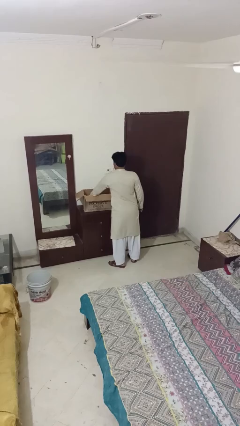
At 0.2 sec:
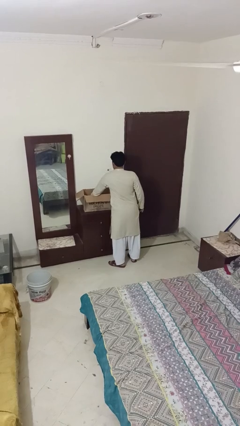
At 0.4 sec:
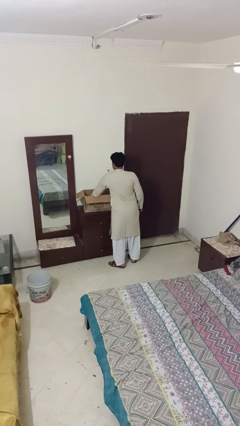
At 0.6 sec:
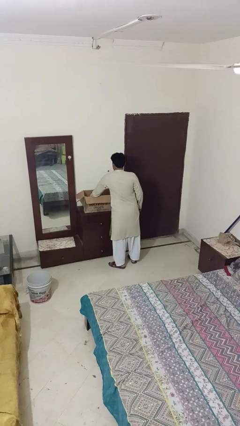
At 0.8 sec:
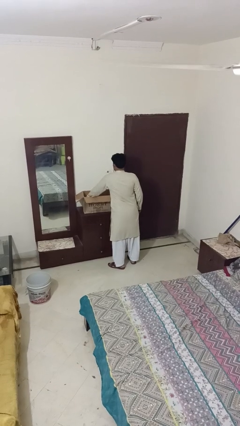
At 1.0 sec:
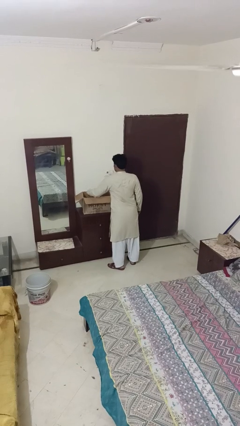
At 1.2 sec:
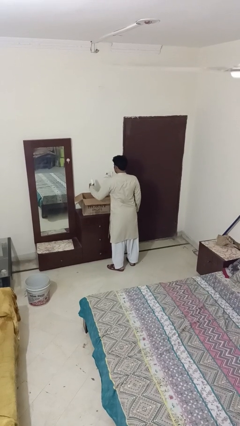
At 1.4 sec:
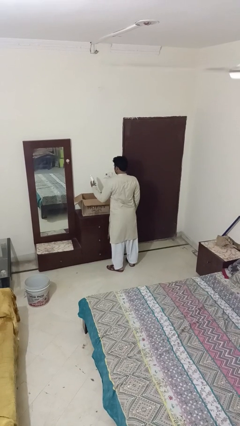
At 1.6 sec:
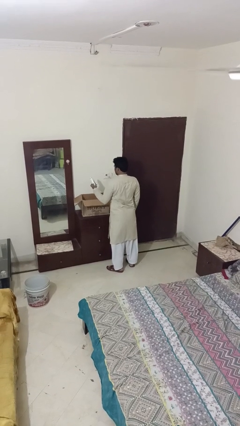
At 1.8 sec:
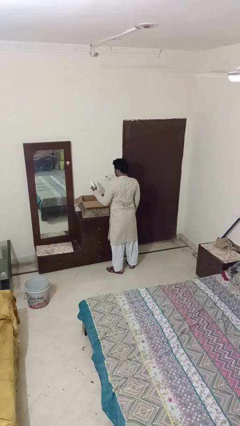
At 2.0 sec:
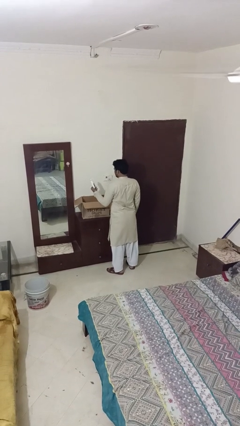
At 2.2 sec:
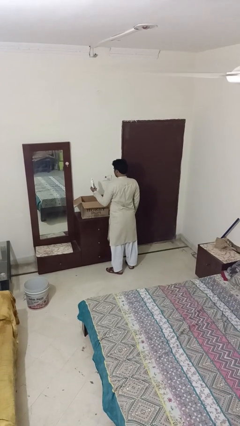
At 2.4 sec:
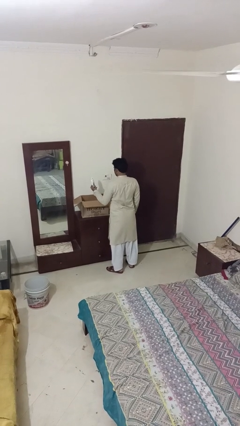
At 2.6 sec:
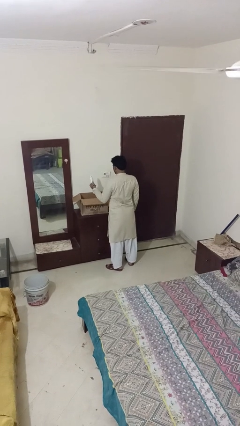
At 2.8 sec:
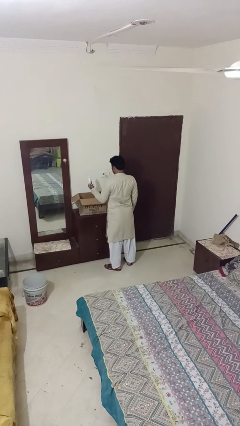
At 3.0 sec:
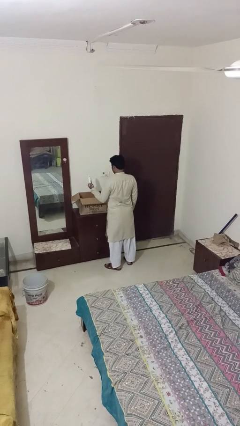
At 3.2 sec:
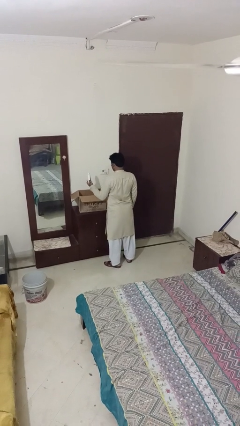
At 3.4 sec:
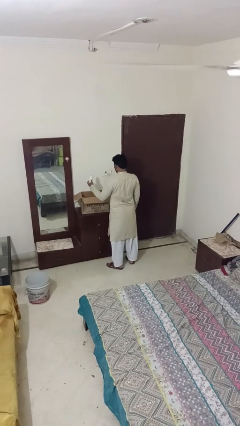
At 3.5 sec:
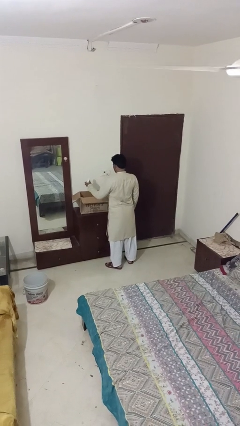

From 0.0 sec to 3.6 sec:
person takes object from box

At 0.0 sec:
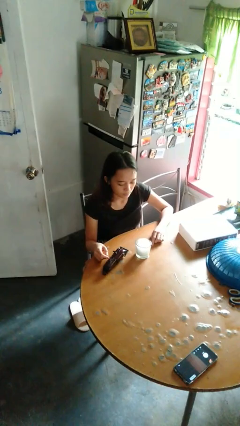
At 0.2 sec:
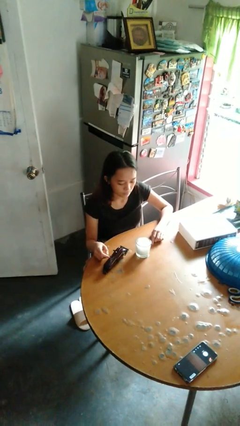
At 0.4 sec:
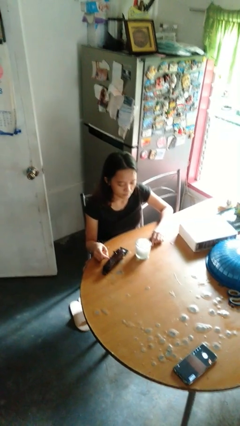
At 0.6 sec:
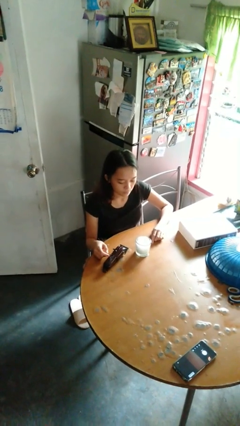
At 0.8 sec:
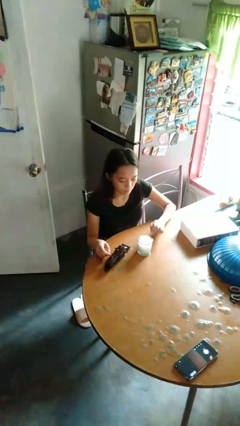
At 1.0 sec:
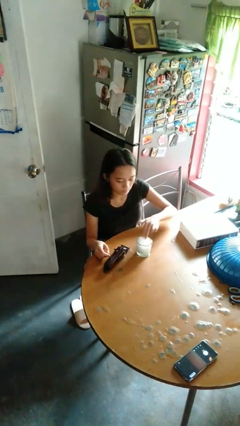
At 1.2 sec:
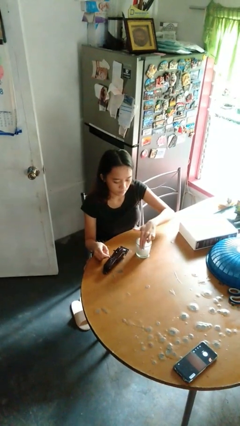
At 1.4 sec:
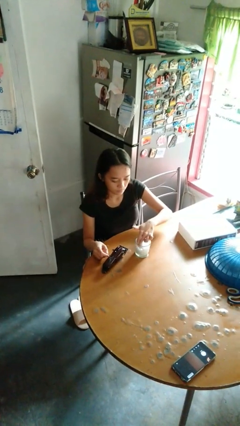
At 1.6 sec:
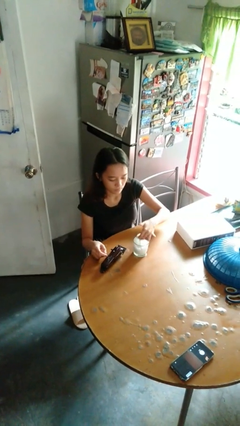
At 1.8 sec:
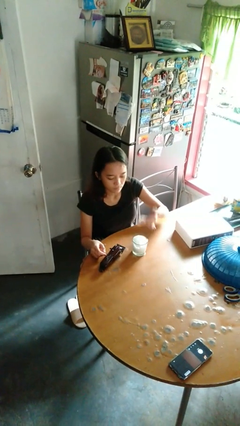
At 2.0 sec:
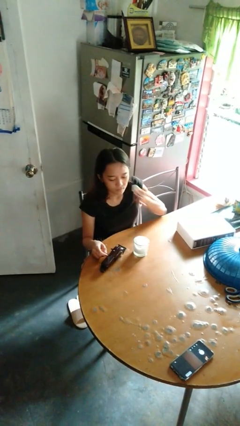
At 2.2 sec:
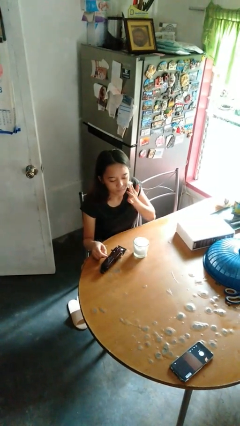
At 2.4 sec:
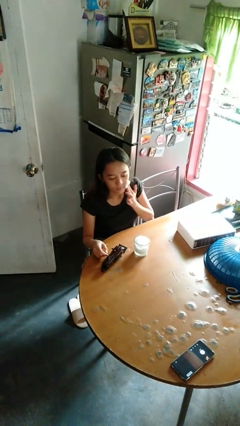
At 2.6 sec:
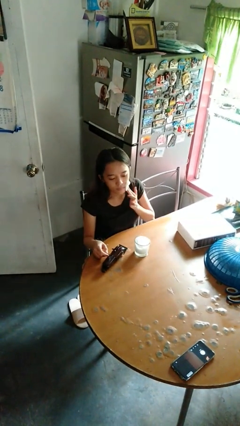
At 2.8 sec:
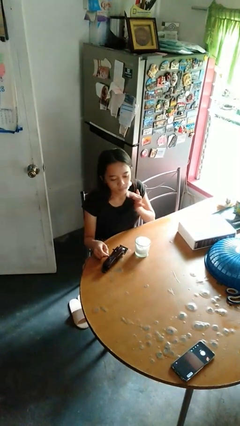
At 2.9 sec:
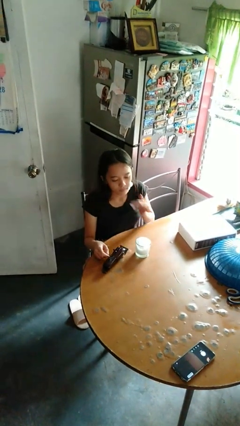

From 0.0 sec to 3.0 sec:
person applies shaving cream

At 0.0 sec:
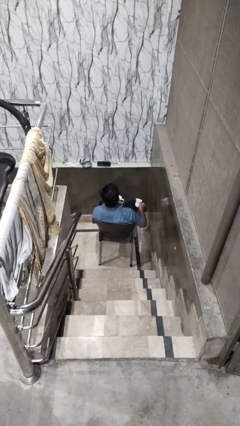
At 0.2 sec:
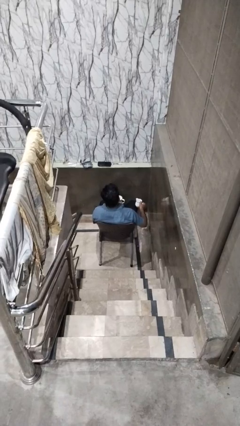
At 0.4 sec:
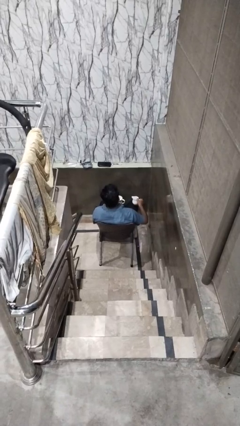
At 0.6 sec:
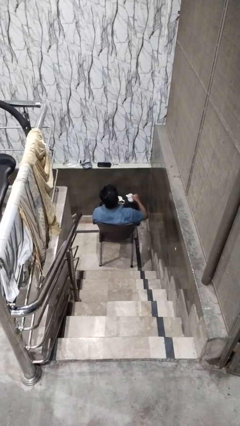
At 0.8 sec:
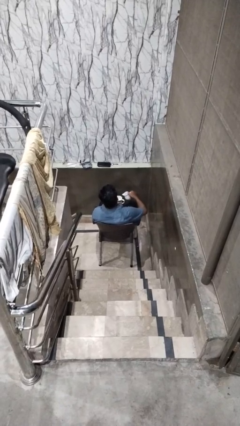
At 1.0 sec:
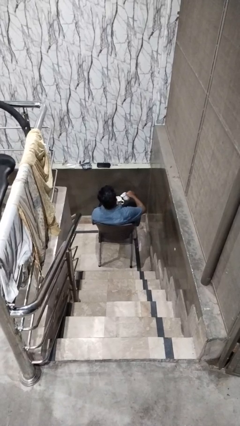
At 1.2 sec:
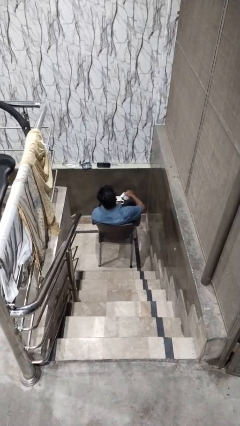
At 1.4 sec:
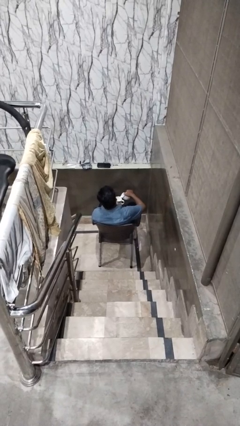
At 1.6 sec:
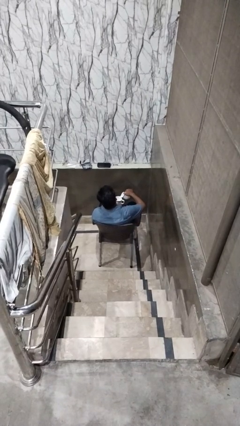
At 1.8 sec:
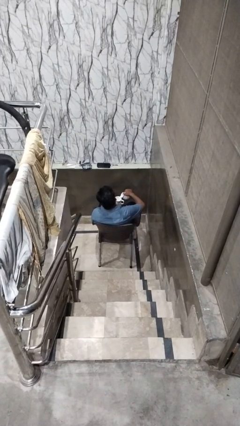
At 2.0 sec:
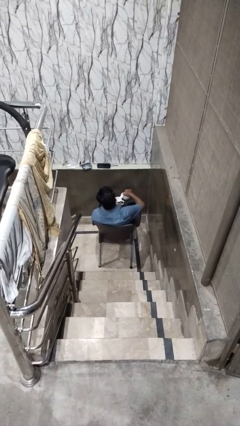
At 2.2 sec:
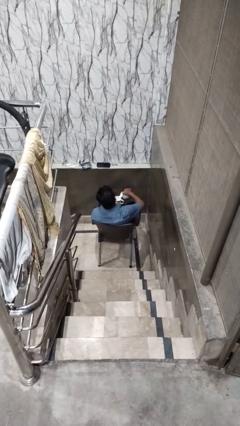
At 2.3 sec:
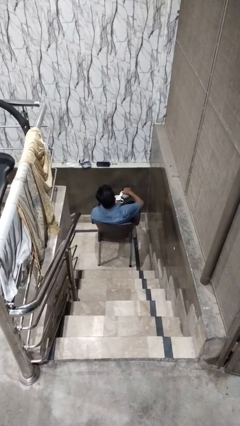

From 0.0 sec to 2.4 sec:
person pours coffee into mug

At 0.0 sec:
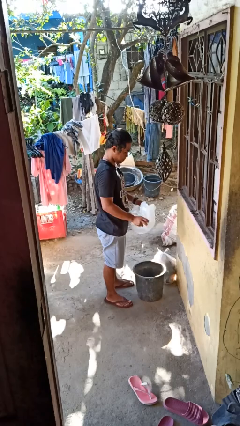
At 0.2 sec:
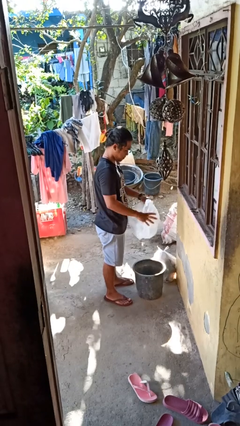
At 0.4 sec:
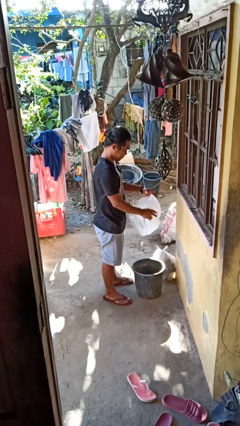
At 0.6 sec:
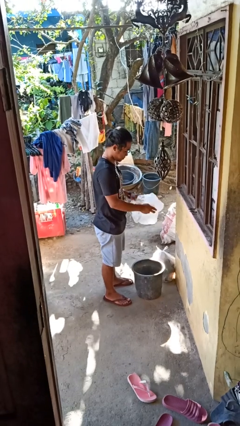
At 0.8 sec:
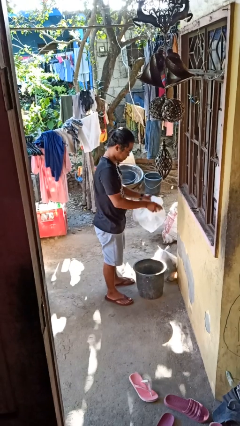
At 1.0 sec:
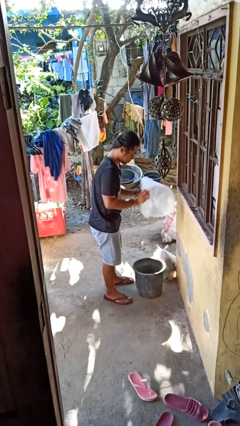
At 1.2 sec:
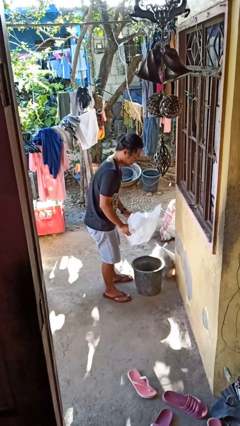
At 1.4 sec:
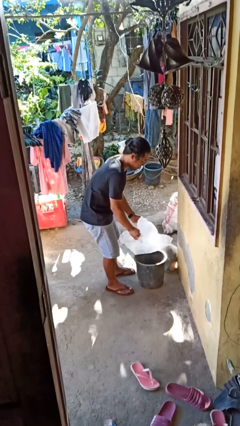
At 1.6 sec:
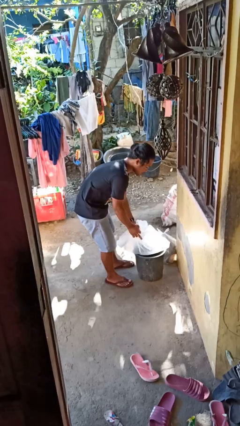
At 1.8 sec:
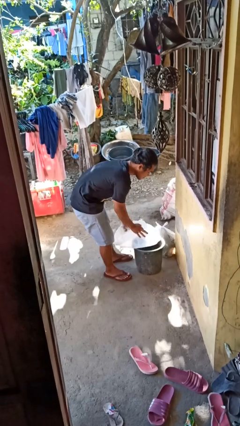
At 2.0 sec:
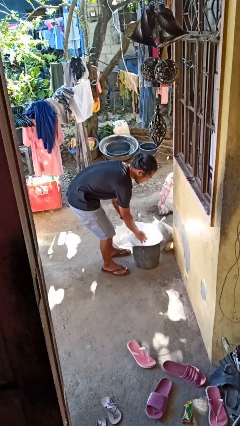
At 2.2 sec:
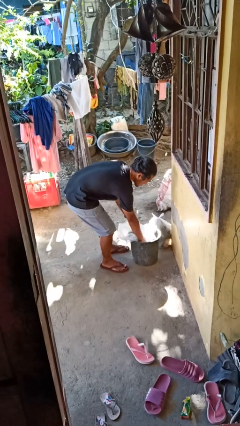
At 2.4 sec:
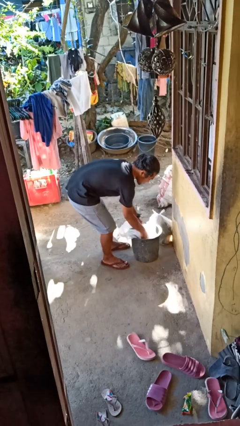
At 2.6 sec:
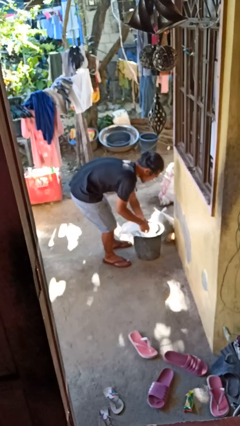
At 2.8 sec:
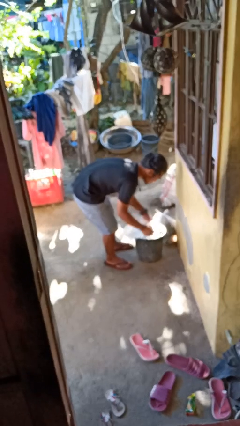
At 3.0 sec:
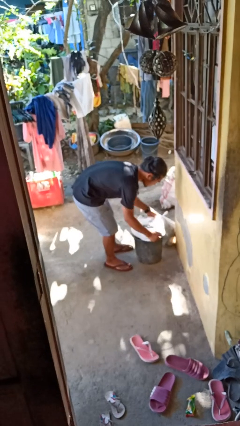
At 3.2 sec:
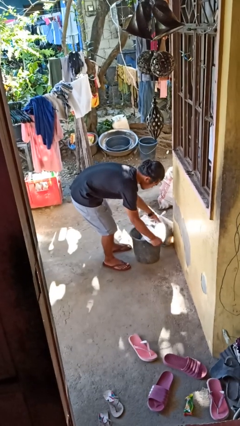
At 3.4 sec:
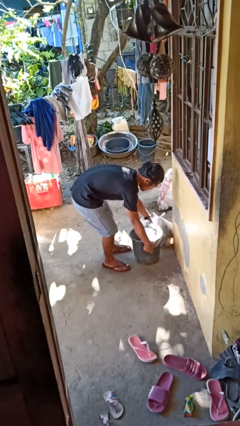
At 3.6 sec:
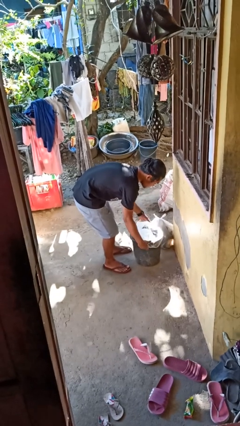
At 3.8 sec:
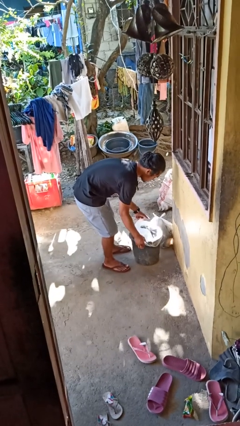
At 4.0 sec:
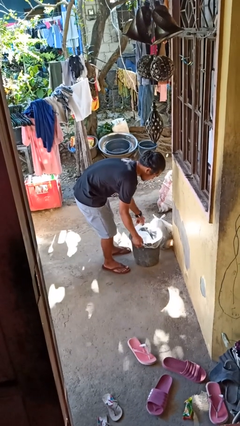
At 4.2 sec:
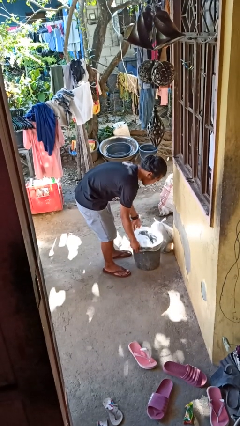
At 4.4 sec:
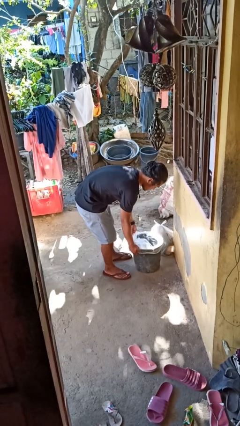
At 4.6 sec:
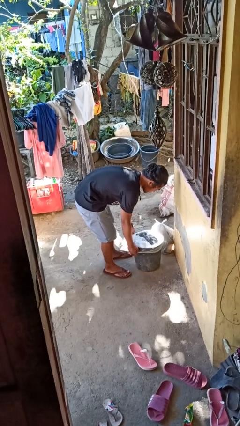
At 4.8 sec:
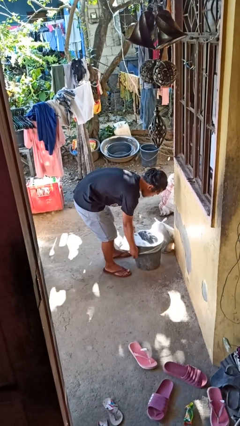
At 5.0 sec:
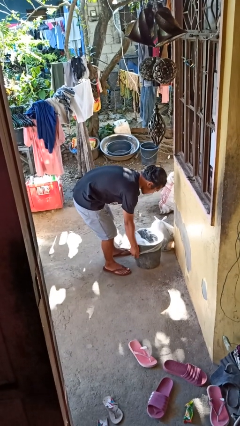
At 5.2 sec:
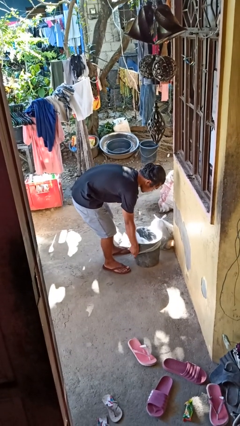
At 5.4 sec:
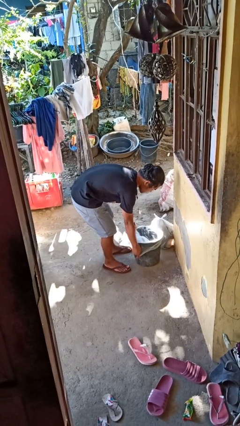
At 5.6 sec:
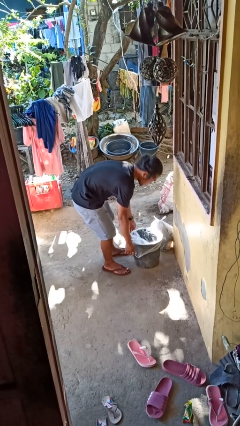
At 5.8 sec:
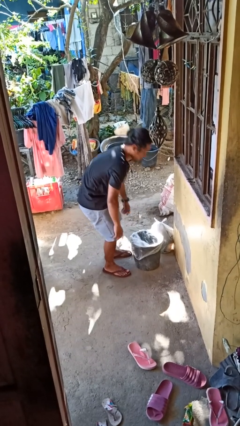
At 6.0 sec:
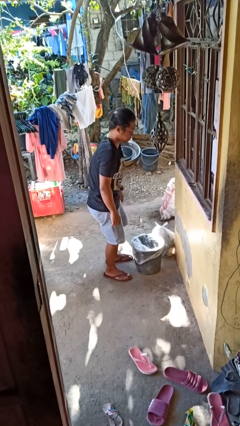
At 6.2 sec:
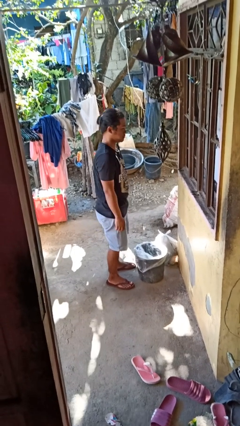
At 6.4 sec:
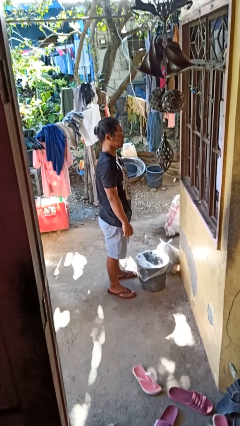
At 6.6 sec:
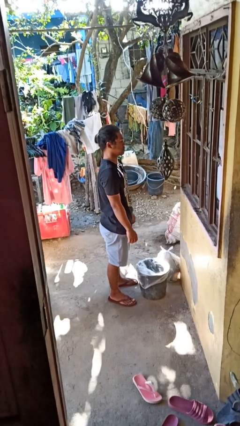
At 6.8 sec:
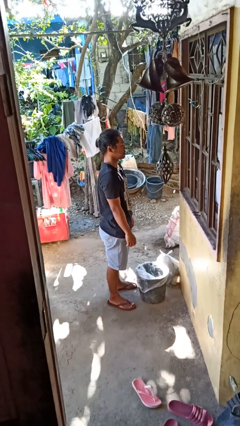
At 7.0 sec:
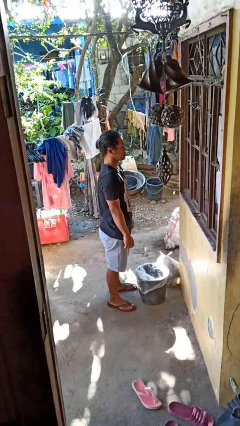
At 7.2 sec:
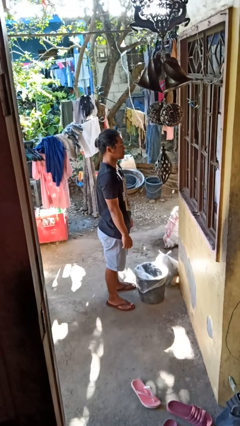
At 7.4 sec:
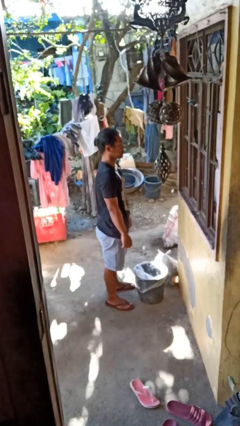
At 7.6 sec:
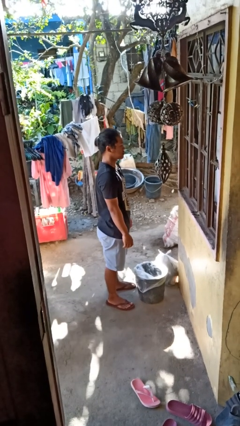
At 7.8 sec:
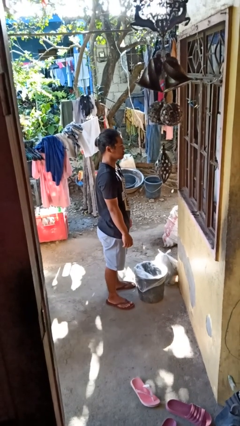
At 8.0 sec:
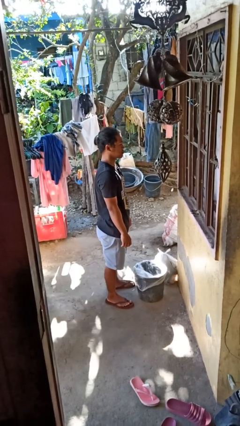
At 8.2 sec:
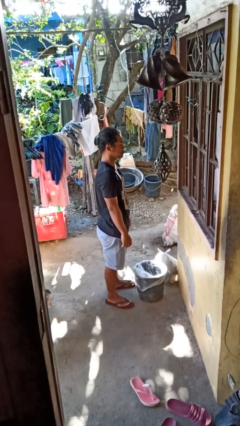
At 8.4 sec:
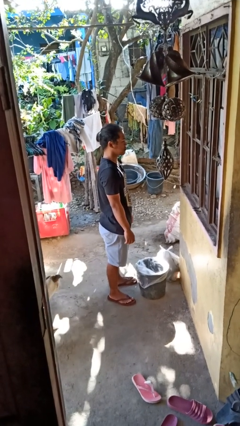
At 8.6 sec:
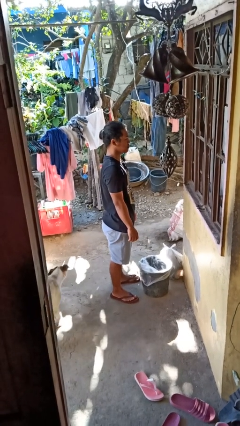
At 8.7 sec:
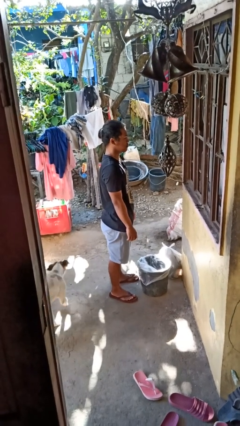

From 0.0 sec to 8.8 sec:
person inserts trashbag into trashcan

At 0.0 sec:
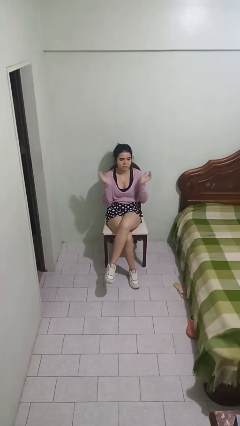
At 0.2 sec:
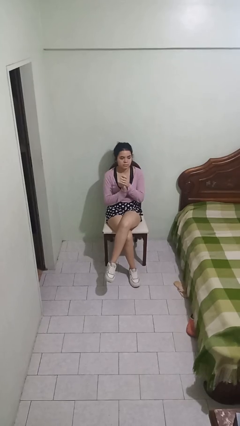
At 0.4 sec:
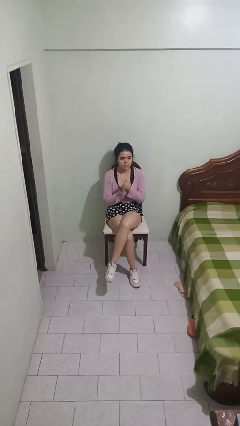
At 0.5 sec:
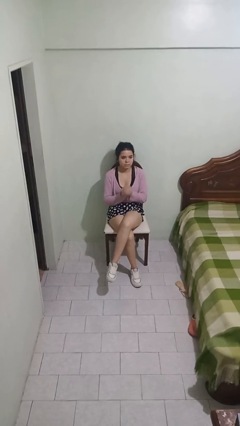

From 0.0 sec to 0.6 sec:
person claps hands
